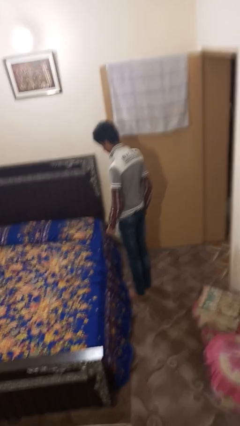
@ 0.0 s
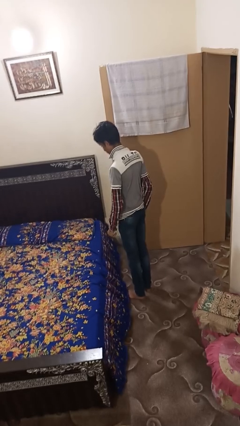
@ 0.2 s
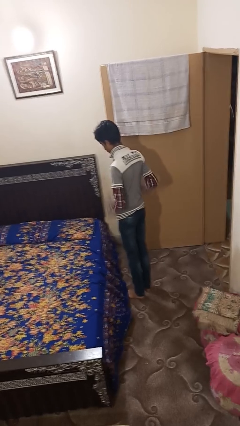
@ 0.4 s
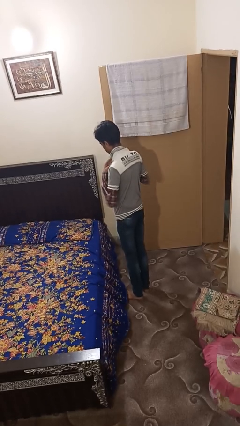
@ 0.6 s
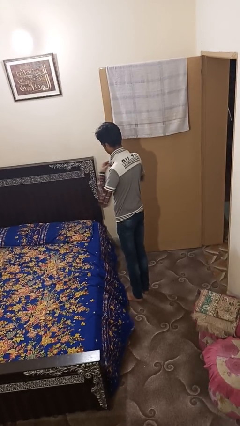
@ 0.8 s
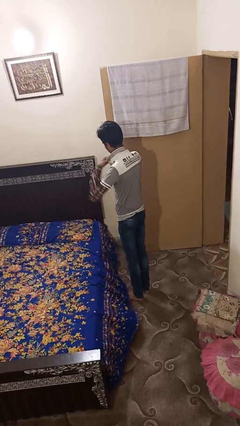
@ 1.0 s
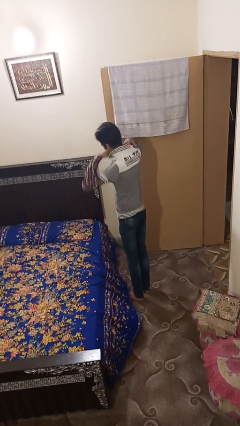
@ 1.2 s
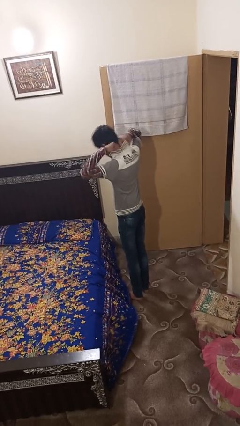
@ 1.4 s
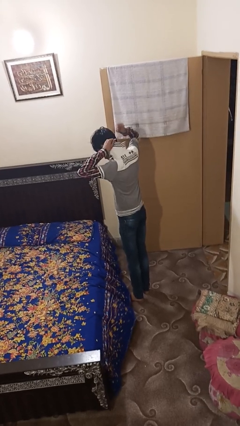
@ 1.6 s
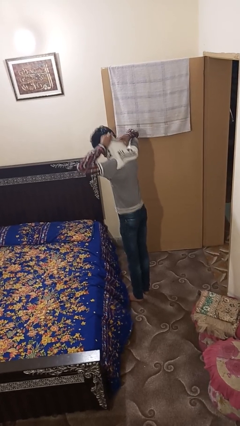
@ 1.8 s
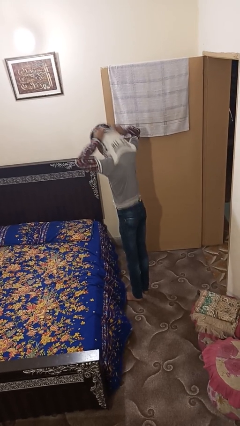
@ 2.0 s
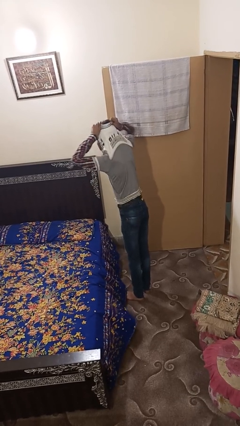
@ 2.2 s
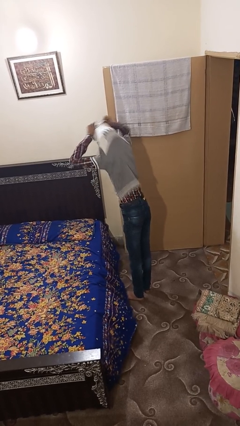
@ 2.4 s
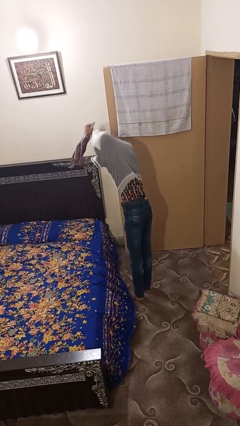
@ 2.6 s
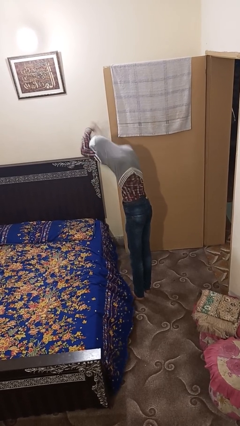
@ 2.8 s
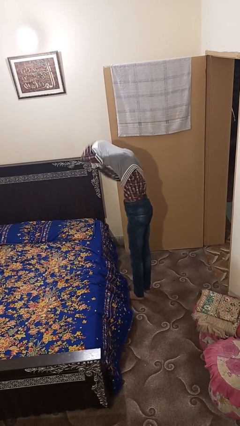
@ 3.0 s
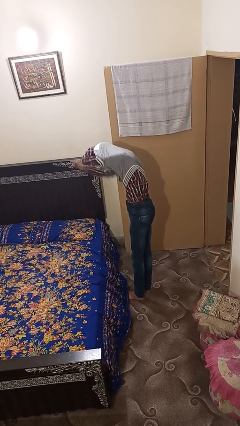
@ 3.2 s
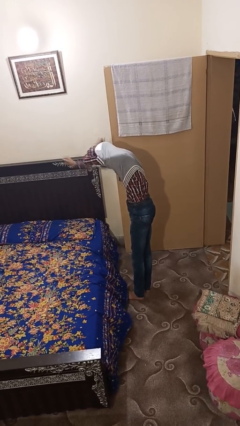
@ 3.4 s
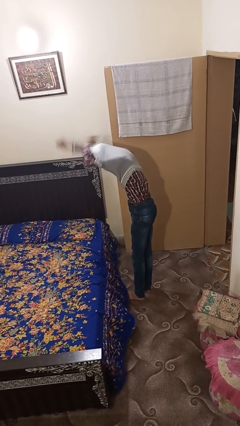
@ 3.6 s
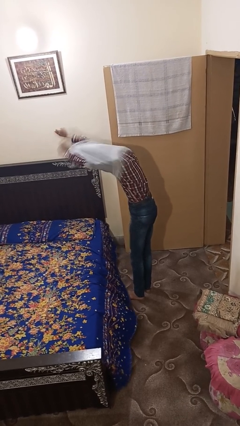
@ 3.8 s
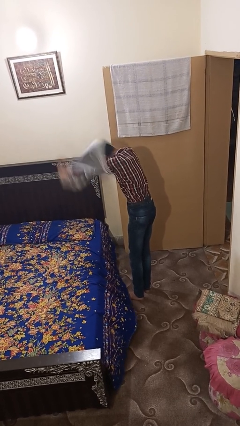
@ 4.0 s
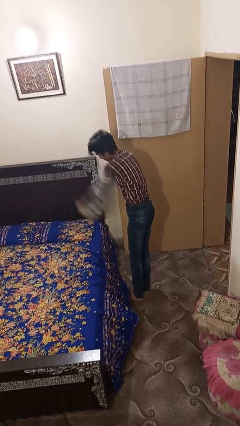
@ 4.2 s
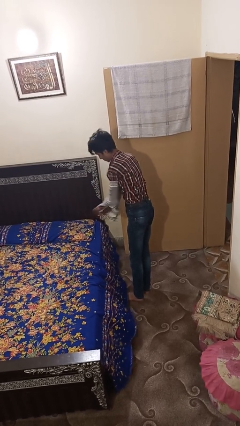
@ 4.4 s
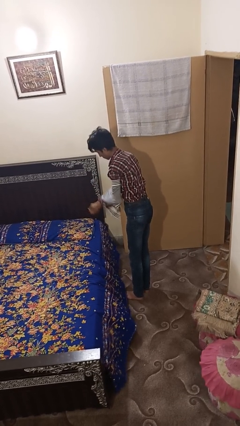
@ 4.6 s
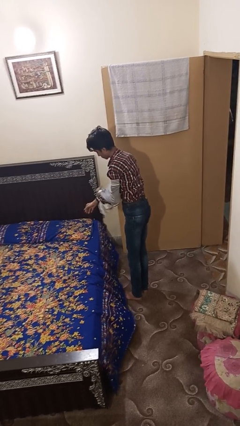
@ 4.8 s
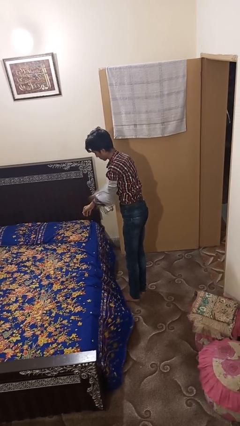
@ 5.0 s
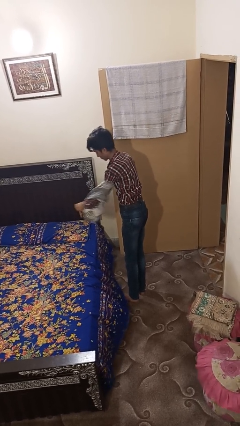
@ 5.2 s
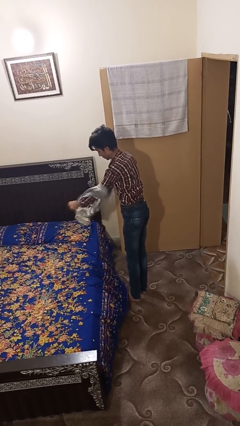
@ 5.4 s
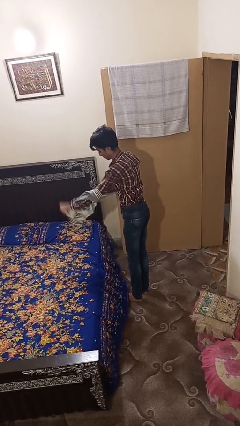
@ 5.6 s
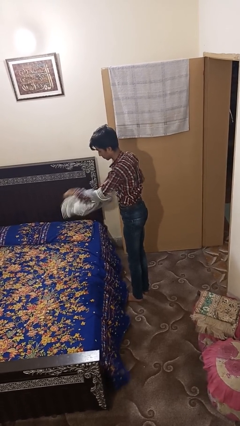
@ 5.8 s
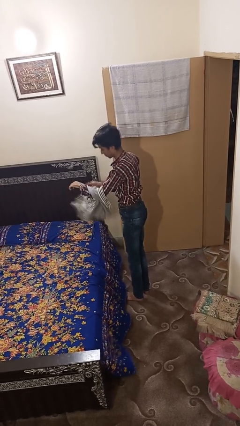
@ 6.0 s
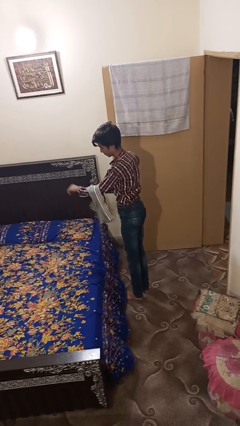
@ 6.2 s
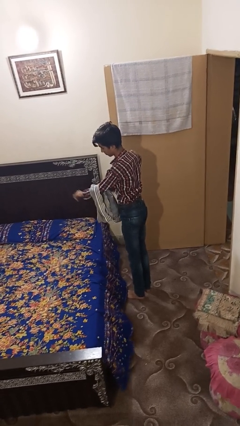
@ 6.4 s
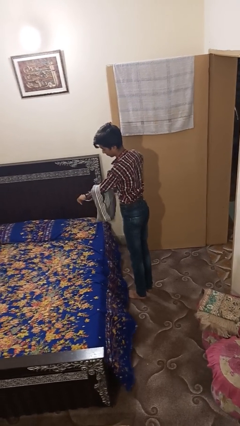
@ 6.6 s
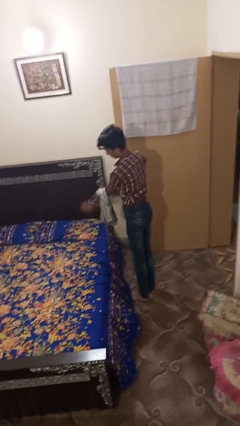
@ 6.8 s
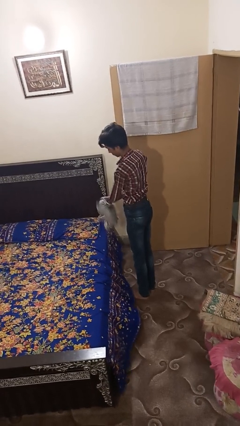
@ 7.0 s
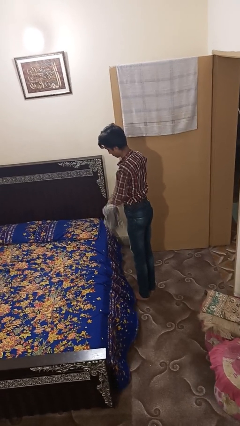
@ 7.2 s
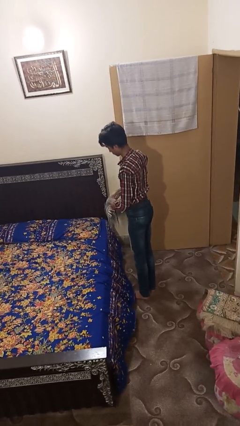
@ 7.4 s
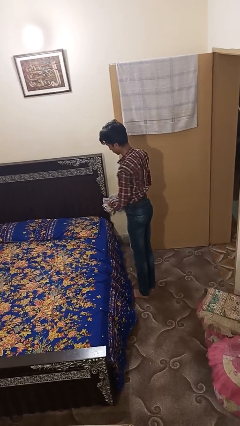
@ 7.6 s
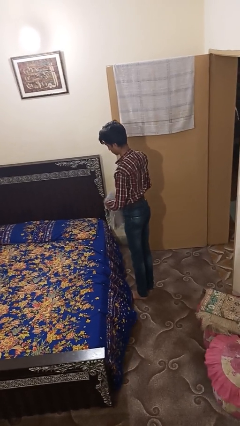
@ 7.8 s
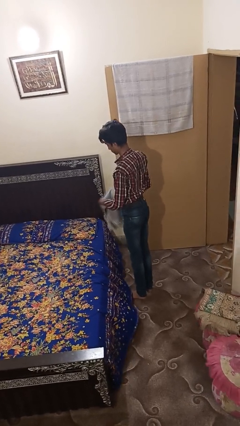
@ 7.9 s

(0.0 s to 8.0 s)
person takes off shirt

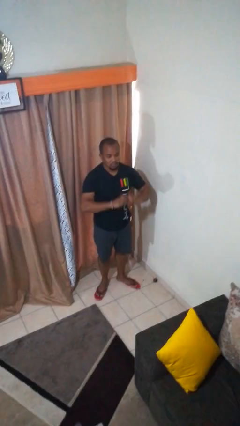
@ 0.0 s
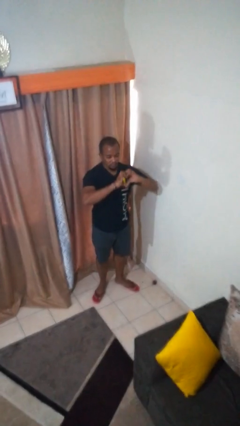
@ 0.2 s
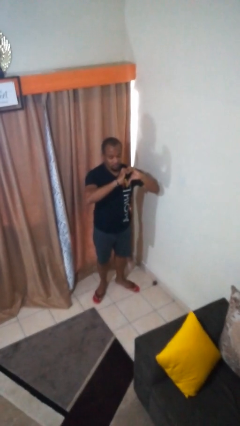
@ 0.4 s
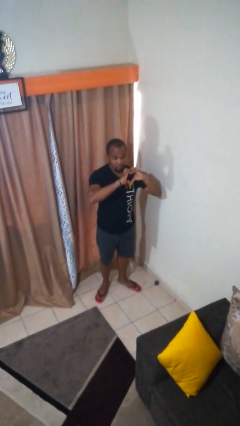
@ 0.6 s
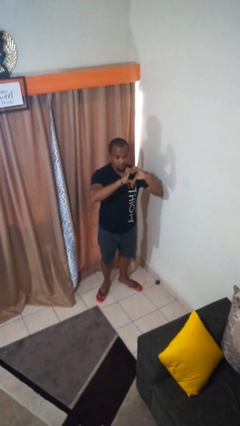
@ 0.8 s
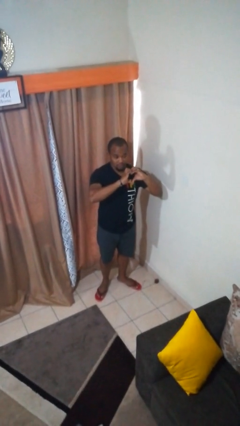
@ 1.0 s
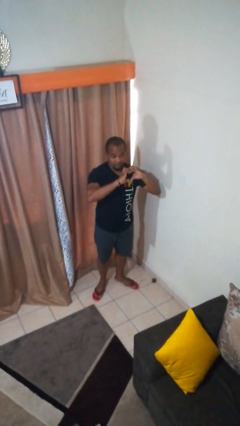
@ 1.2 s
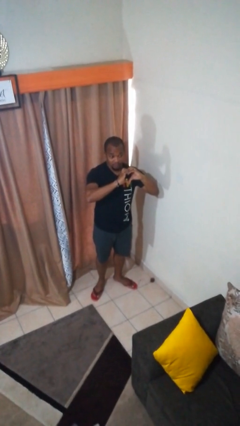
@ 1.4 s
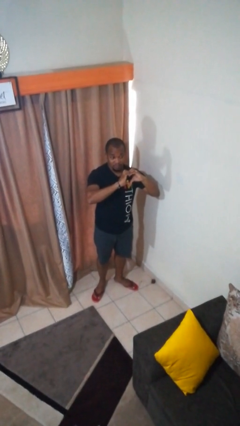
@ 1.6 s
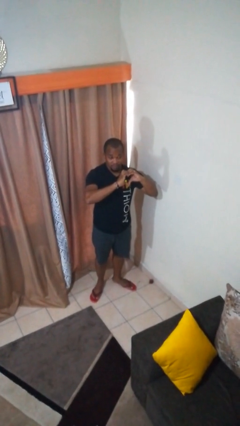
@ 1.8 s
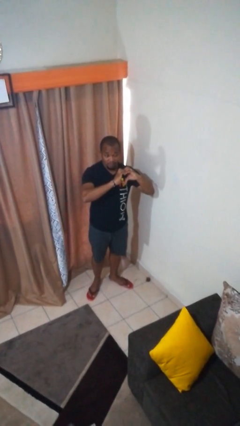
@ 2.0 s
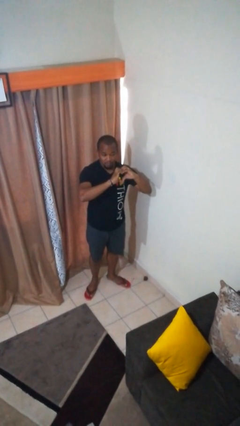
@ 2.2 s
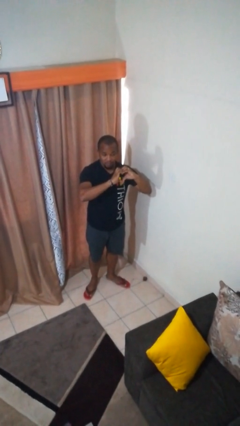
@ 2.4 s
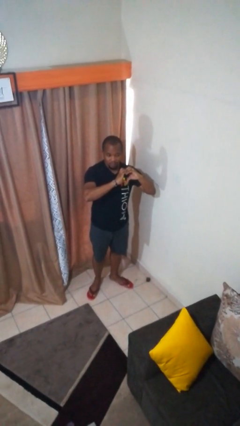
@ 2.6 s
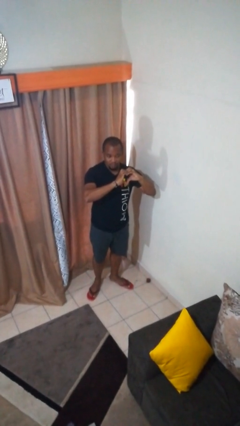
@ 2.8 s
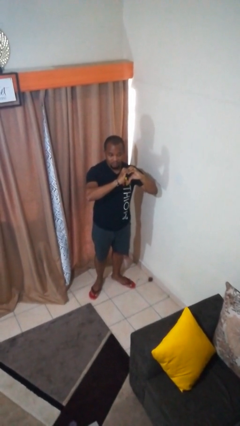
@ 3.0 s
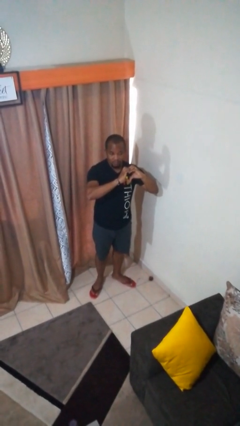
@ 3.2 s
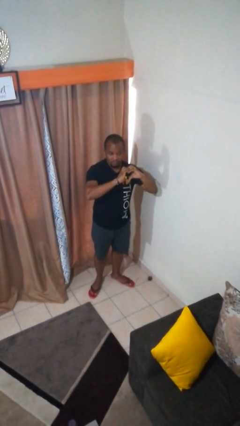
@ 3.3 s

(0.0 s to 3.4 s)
person gestures heart

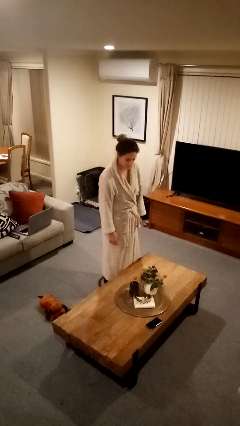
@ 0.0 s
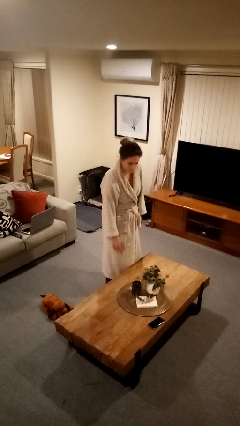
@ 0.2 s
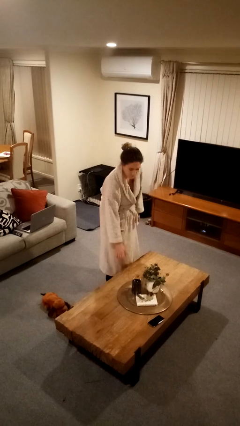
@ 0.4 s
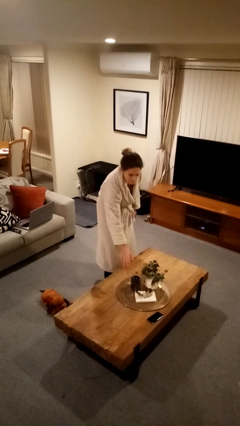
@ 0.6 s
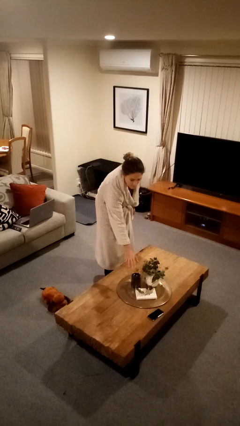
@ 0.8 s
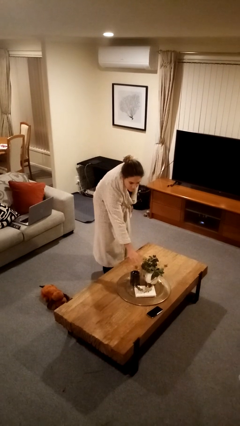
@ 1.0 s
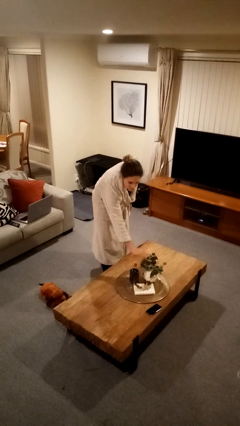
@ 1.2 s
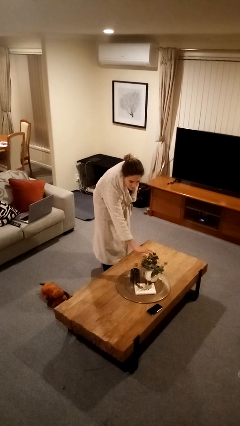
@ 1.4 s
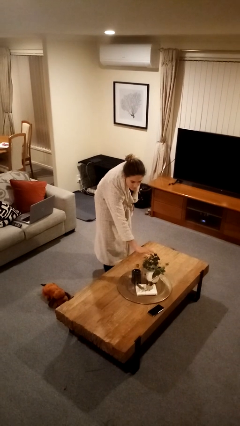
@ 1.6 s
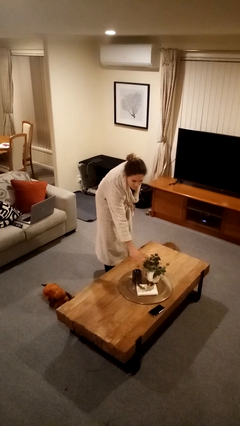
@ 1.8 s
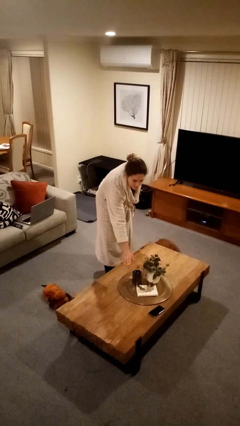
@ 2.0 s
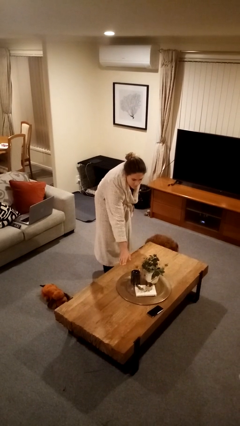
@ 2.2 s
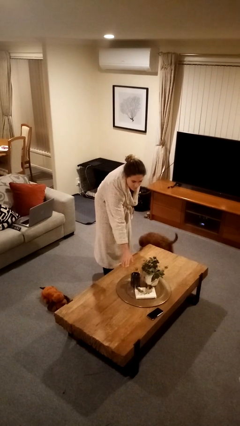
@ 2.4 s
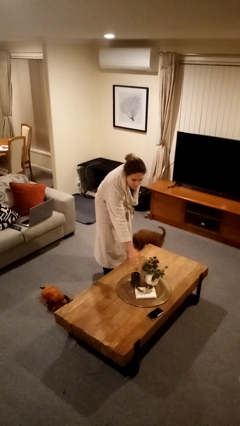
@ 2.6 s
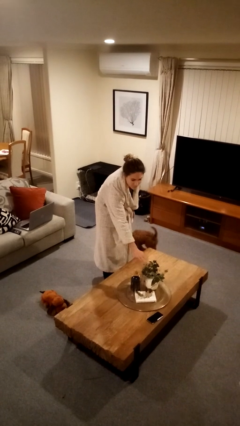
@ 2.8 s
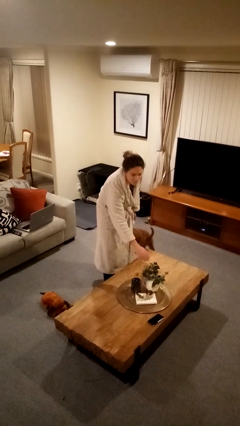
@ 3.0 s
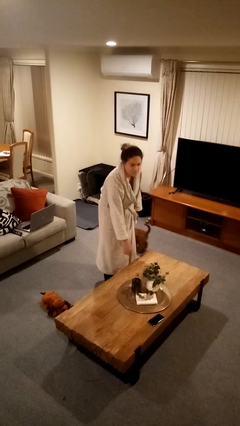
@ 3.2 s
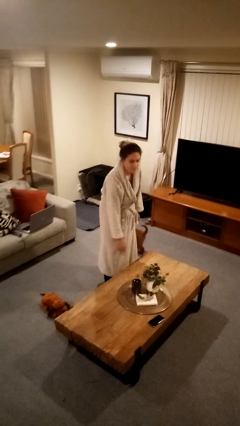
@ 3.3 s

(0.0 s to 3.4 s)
person waves hand over object

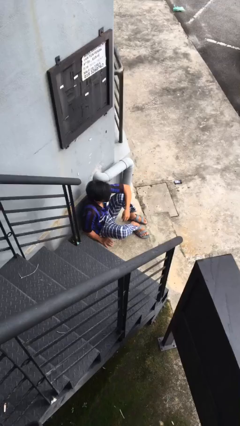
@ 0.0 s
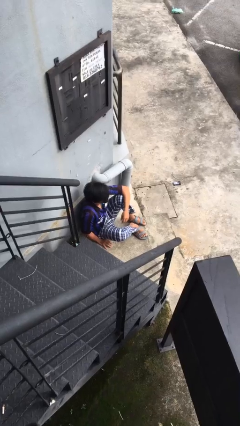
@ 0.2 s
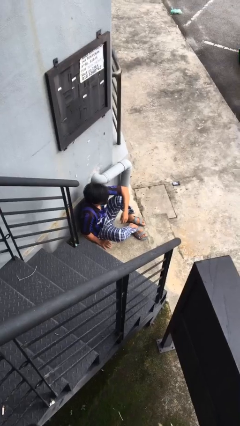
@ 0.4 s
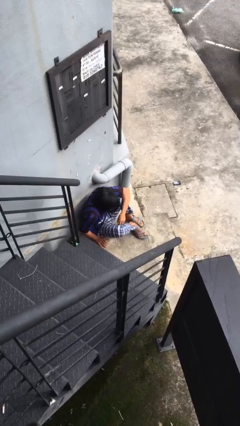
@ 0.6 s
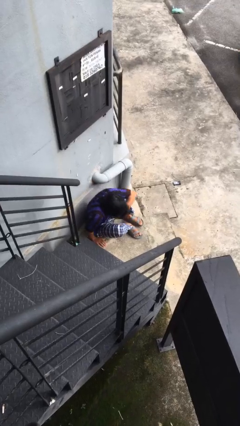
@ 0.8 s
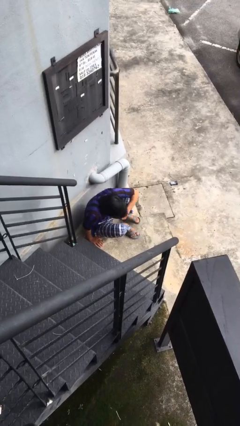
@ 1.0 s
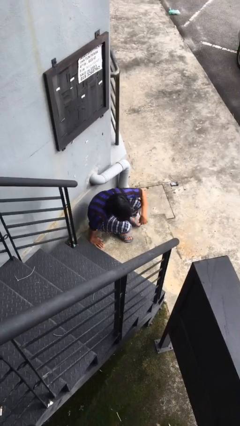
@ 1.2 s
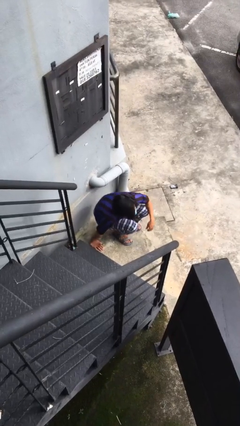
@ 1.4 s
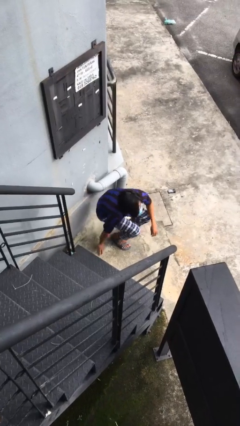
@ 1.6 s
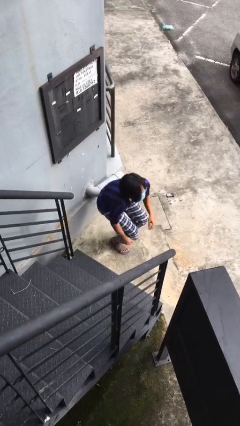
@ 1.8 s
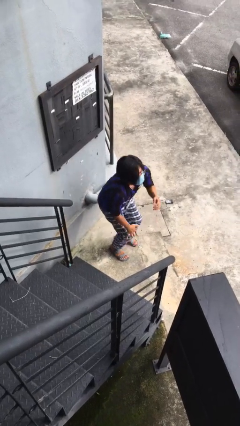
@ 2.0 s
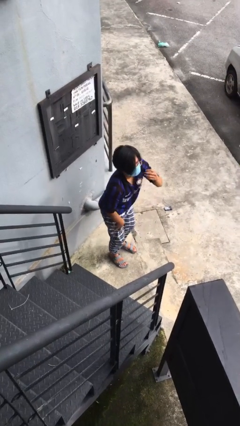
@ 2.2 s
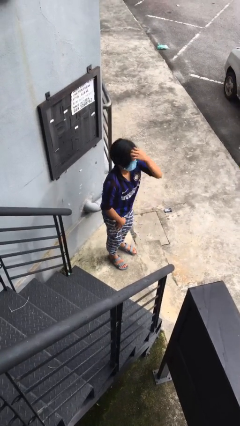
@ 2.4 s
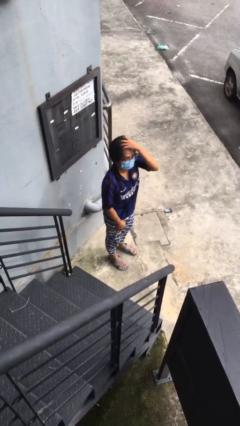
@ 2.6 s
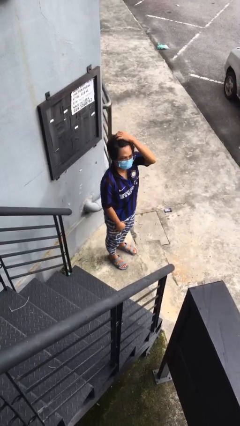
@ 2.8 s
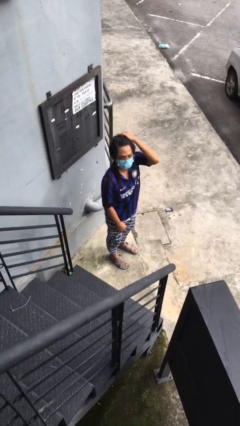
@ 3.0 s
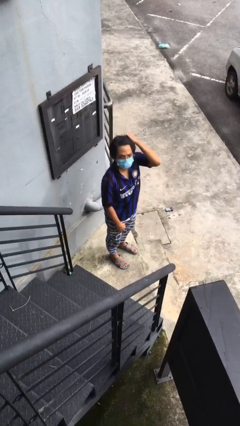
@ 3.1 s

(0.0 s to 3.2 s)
person stands up
